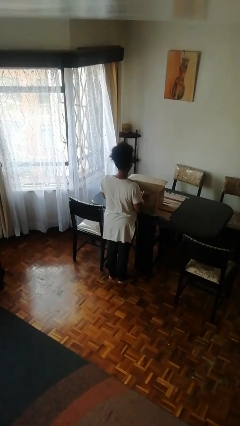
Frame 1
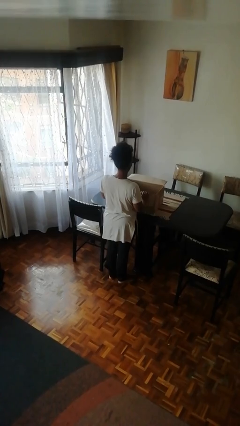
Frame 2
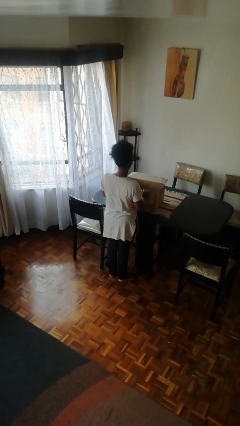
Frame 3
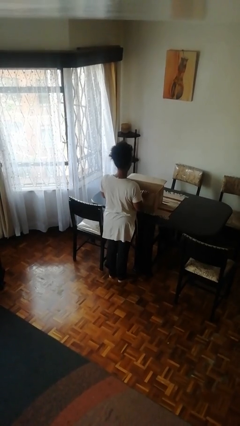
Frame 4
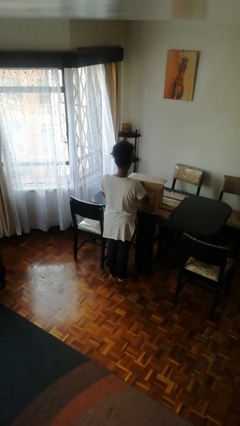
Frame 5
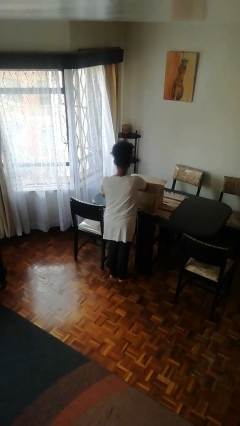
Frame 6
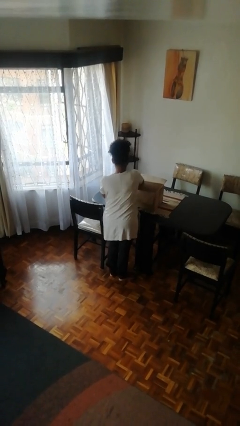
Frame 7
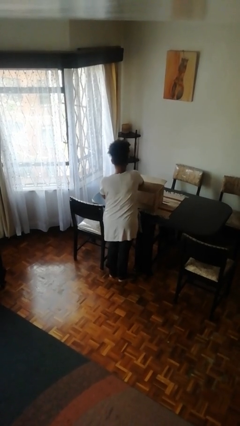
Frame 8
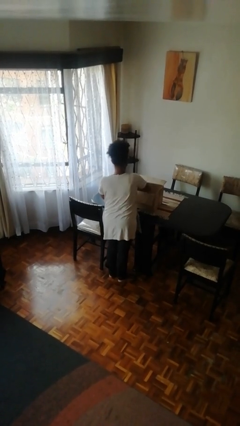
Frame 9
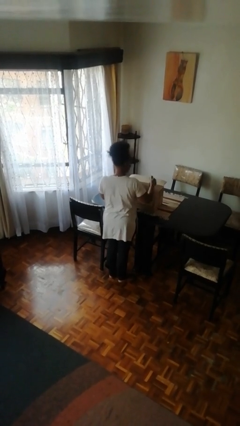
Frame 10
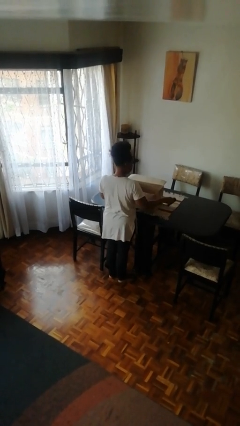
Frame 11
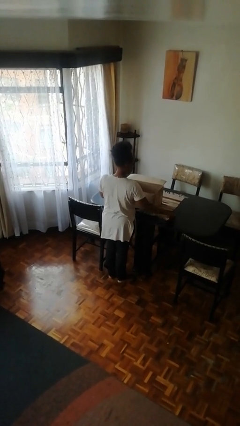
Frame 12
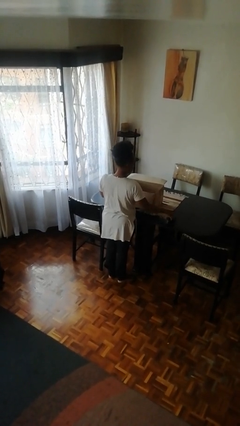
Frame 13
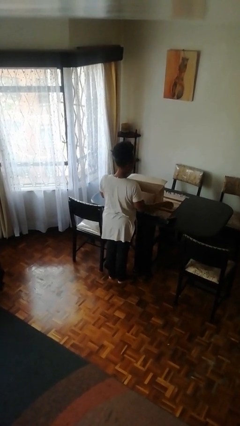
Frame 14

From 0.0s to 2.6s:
person takes object from box

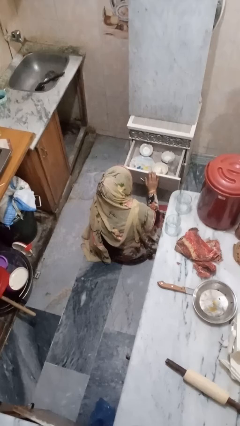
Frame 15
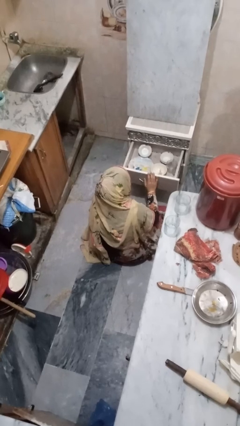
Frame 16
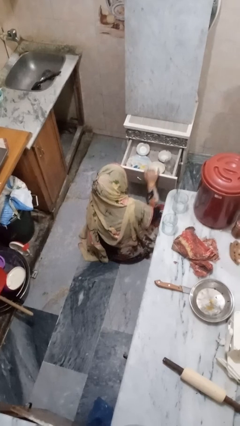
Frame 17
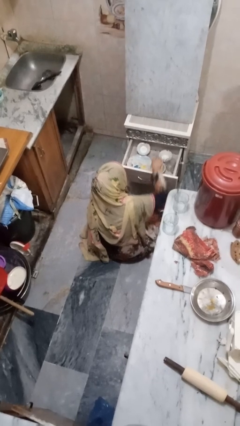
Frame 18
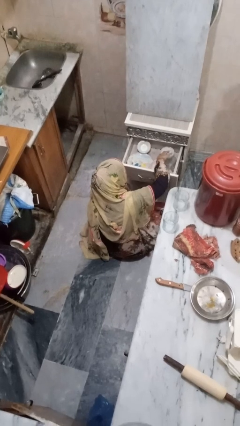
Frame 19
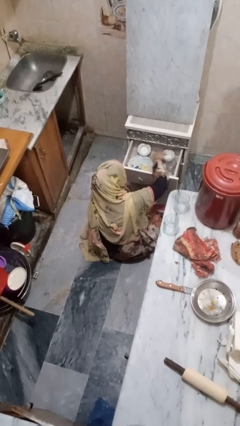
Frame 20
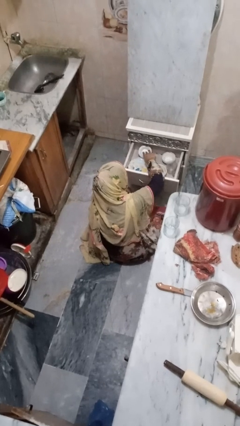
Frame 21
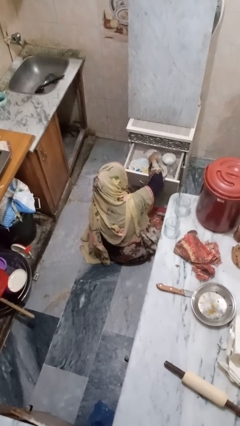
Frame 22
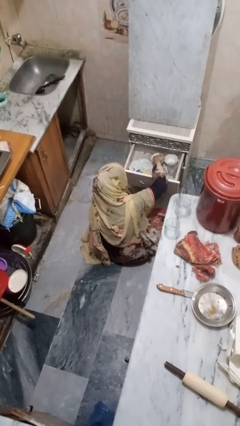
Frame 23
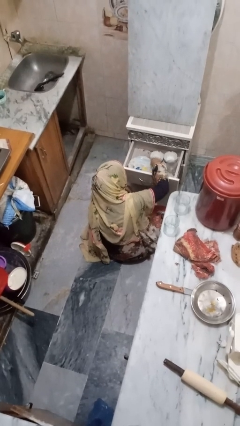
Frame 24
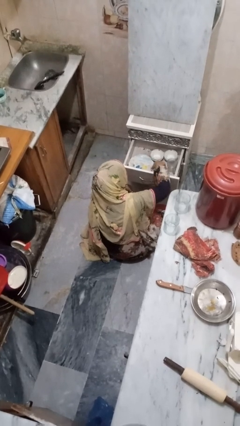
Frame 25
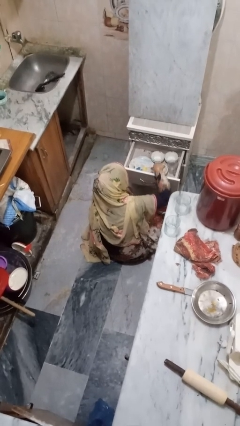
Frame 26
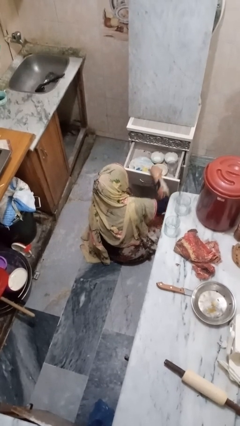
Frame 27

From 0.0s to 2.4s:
person searches in kitchen drawer

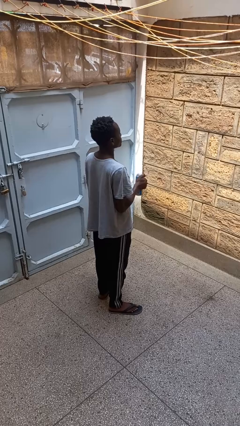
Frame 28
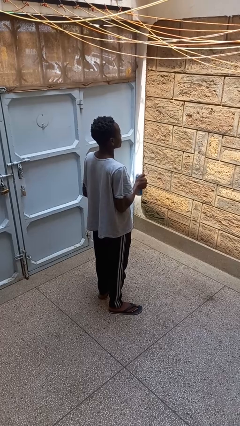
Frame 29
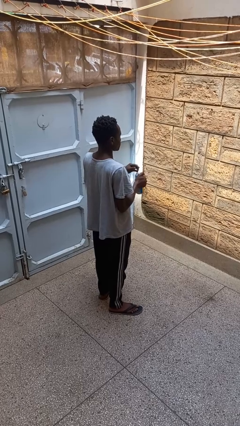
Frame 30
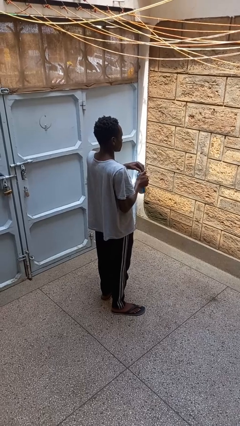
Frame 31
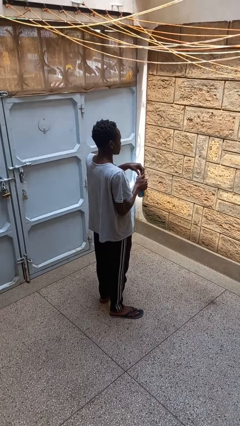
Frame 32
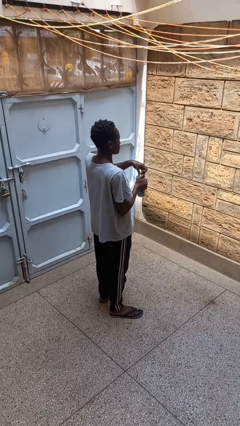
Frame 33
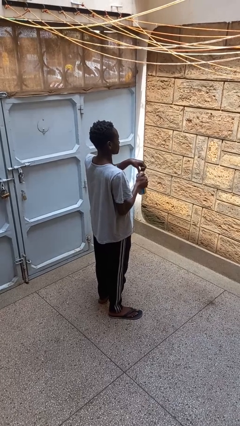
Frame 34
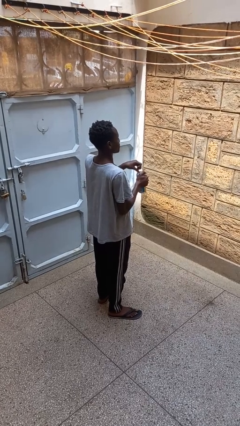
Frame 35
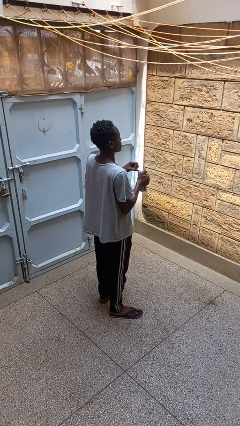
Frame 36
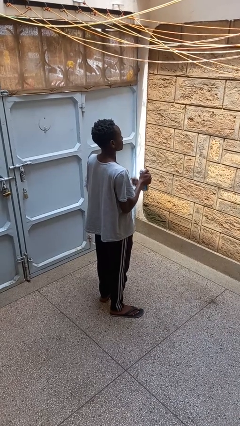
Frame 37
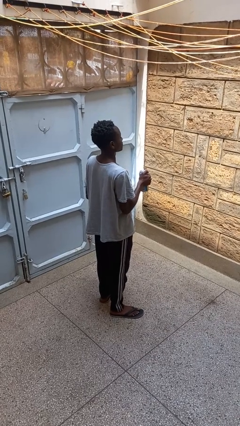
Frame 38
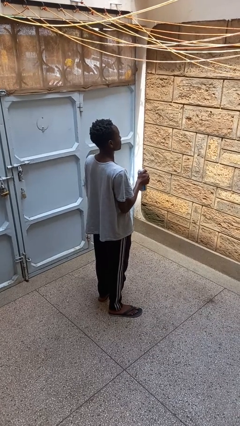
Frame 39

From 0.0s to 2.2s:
person opens beverage can

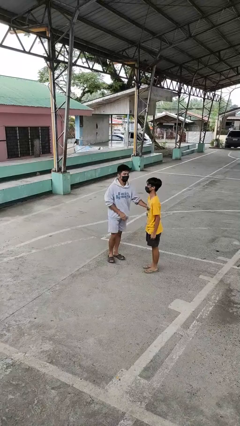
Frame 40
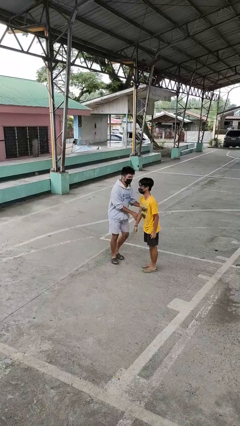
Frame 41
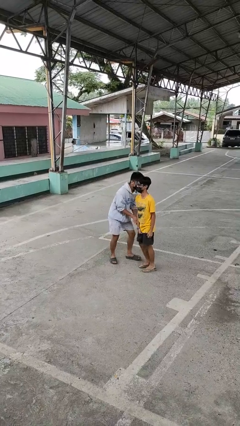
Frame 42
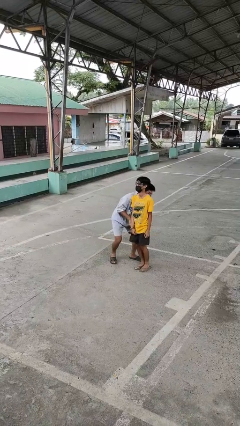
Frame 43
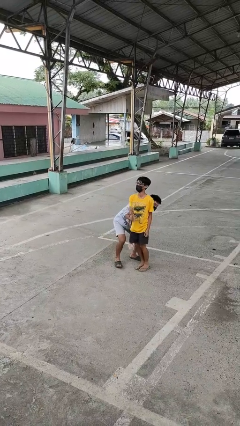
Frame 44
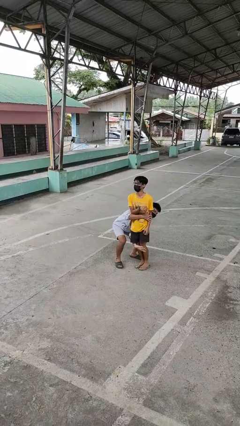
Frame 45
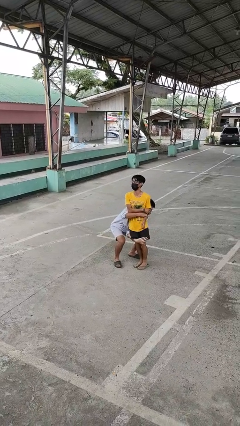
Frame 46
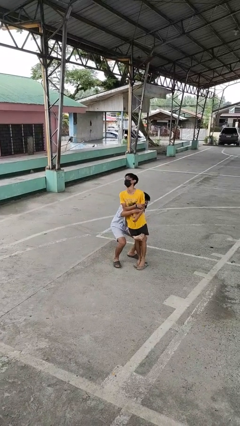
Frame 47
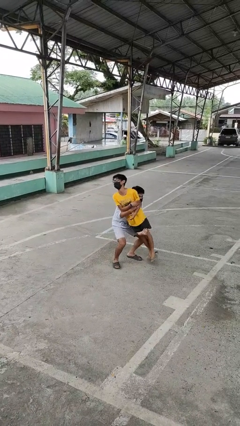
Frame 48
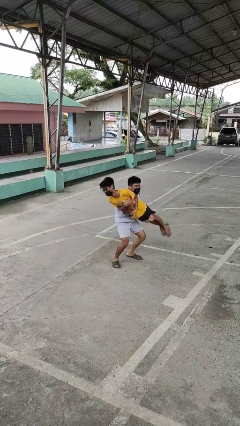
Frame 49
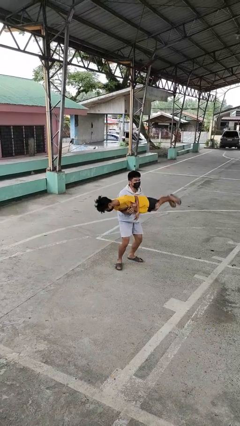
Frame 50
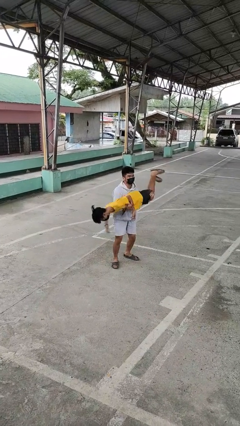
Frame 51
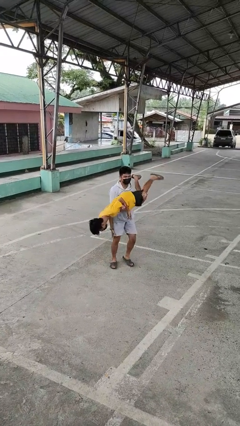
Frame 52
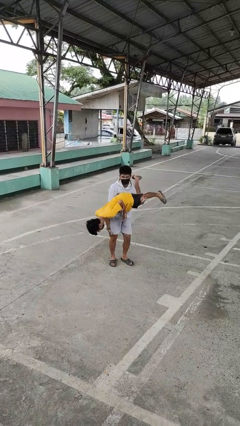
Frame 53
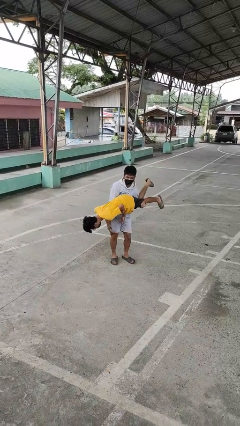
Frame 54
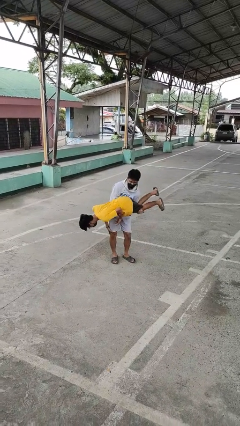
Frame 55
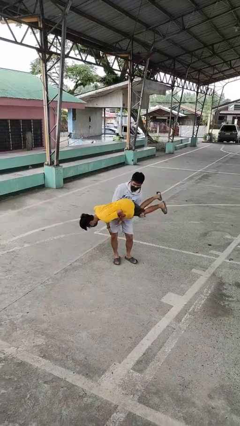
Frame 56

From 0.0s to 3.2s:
person picks up person

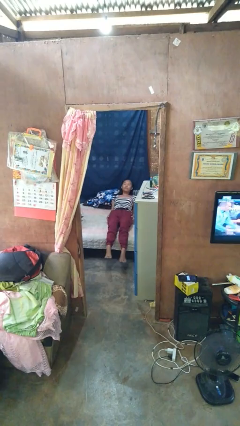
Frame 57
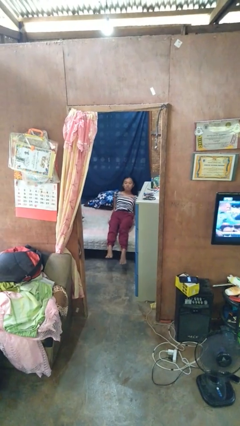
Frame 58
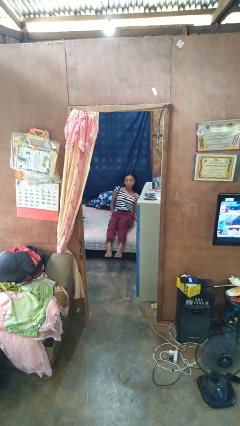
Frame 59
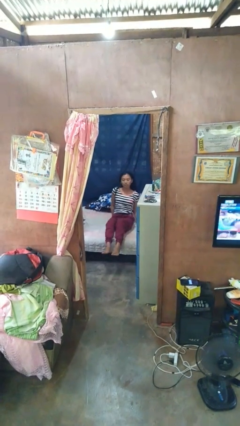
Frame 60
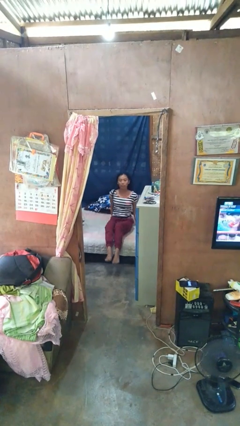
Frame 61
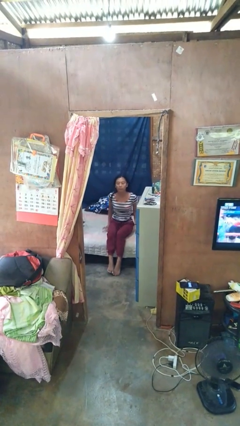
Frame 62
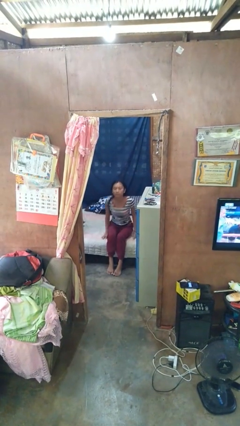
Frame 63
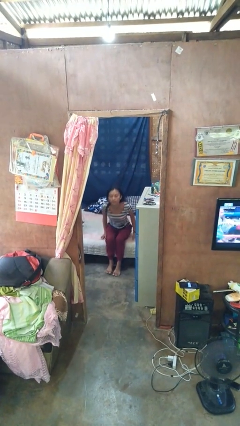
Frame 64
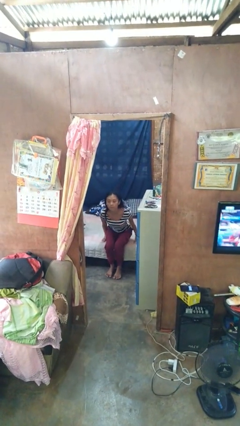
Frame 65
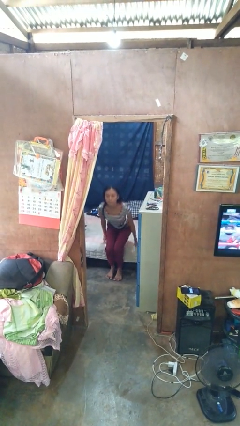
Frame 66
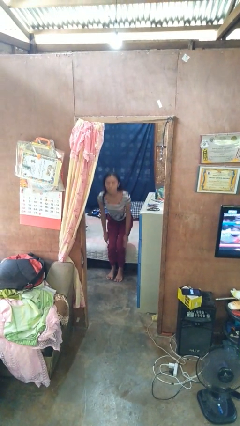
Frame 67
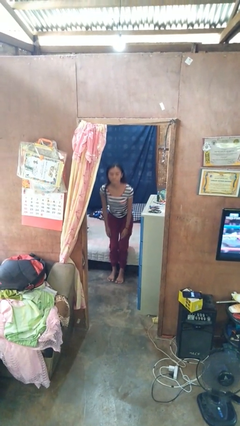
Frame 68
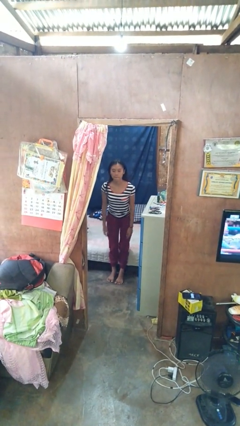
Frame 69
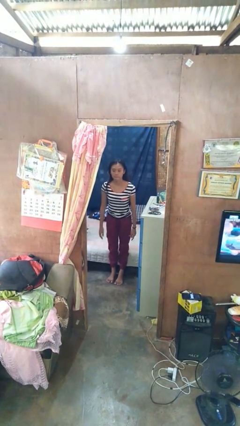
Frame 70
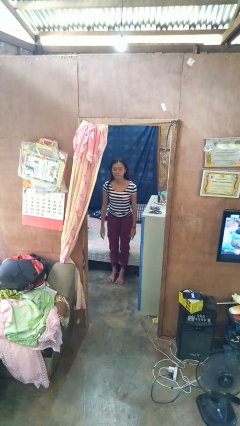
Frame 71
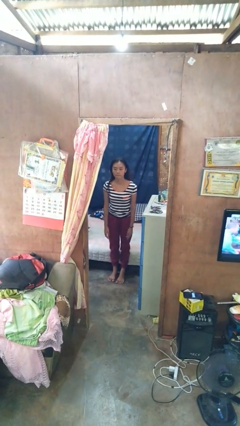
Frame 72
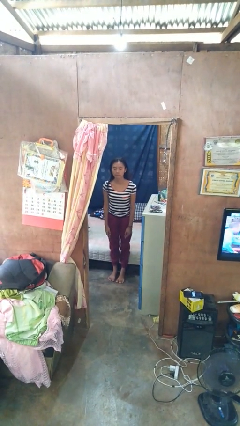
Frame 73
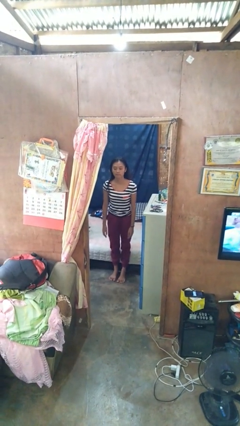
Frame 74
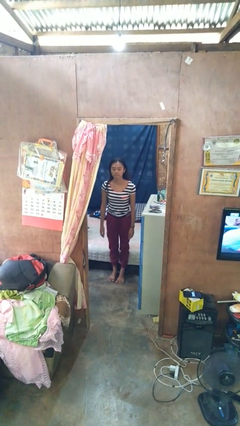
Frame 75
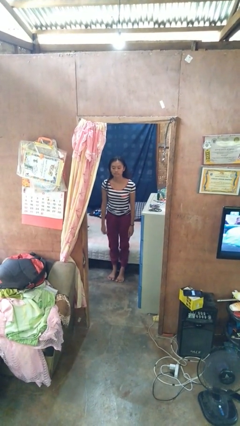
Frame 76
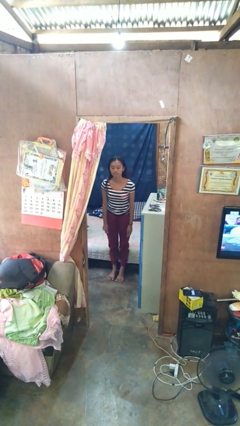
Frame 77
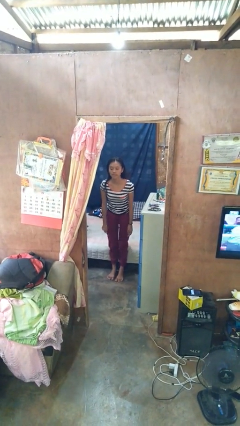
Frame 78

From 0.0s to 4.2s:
person stands up

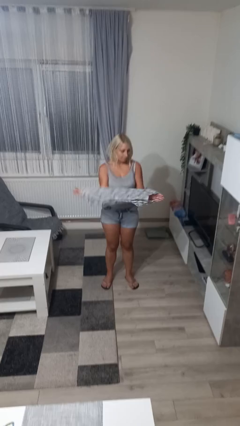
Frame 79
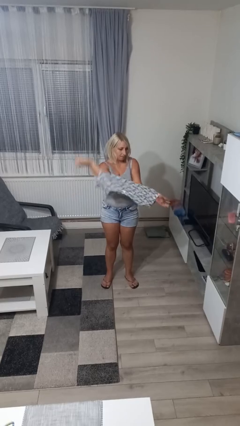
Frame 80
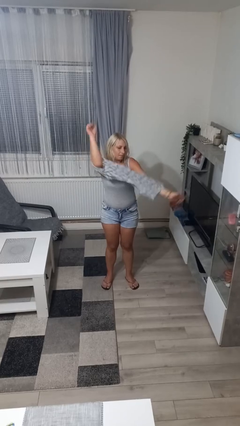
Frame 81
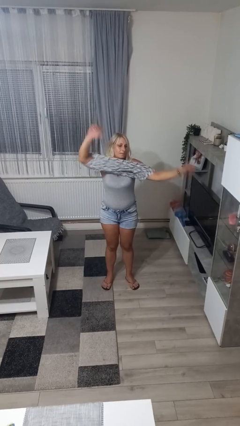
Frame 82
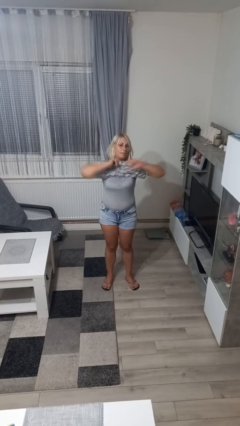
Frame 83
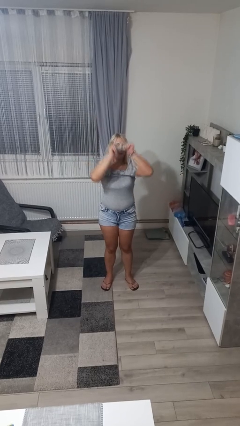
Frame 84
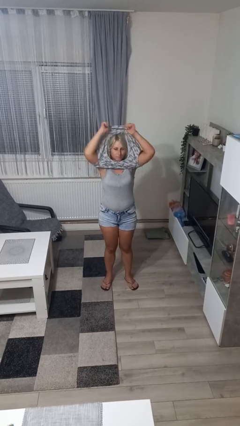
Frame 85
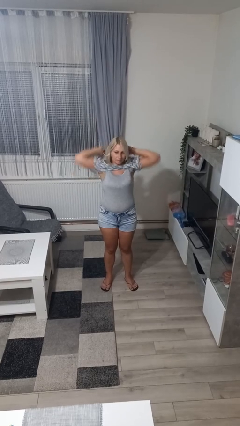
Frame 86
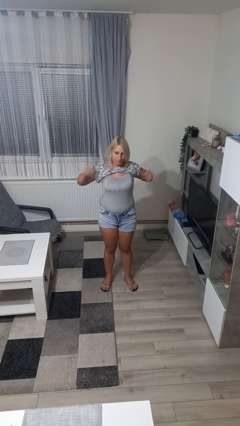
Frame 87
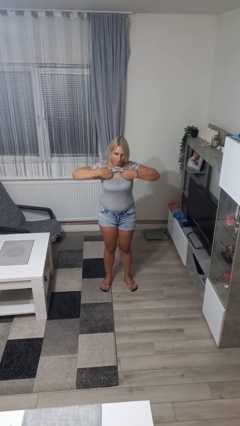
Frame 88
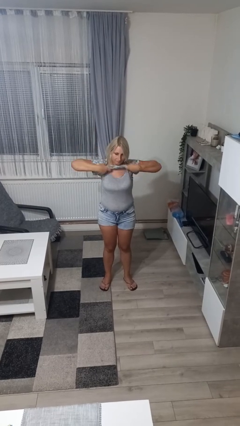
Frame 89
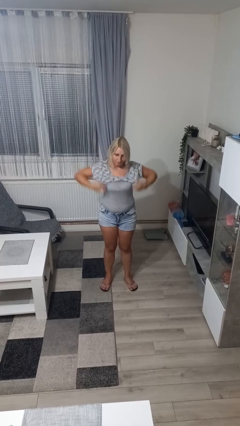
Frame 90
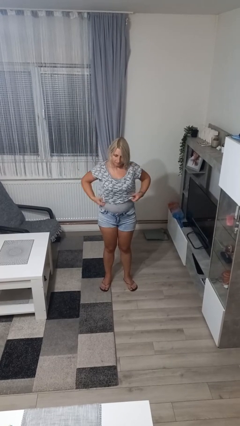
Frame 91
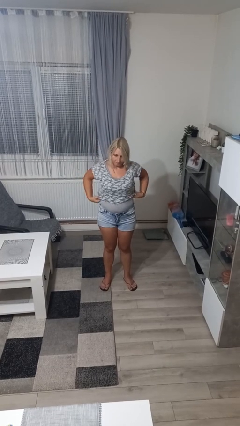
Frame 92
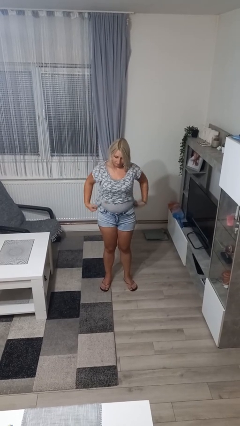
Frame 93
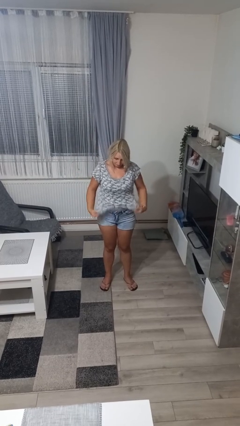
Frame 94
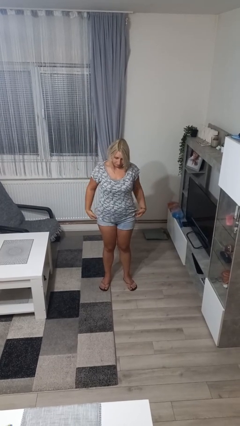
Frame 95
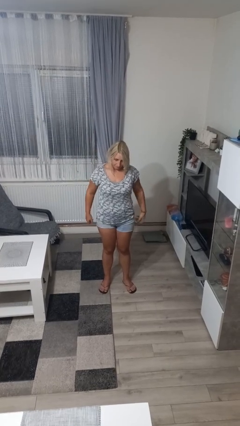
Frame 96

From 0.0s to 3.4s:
person puts on shirt
